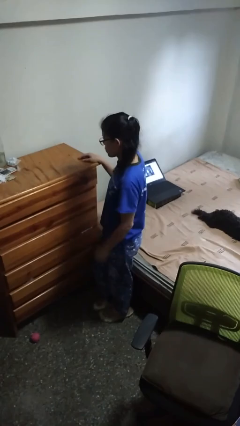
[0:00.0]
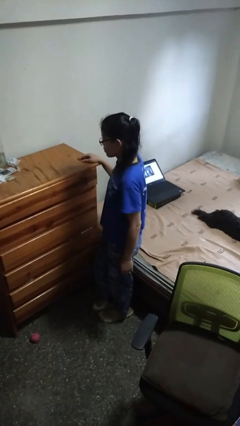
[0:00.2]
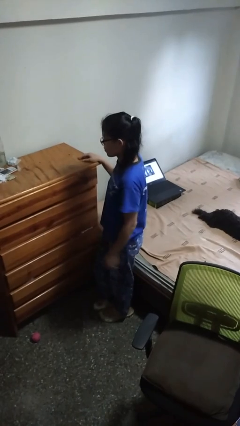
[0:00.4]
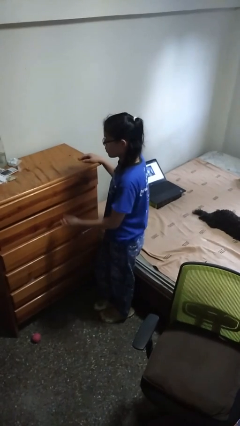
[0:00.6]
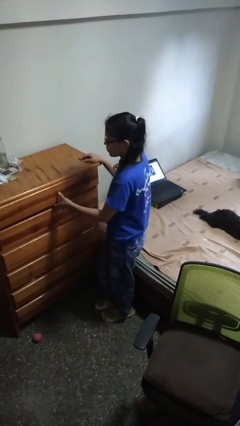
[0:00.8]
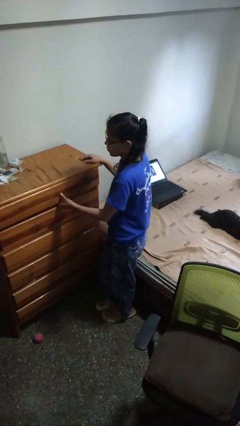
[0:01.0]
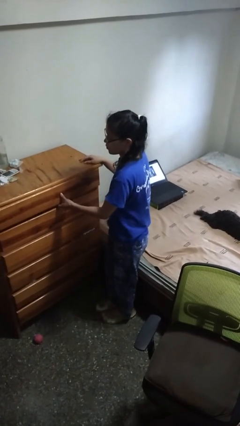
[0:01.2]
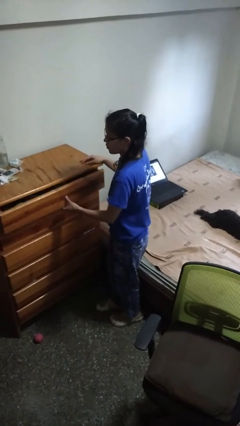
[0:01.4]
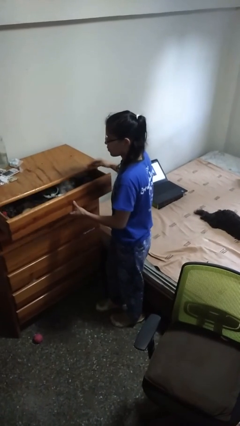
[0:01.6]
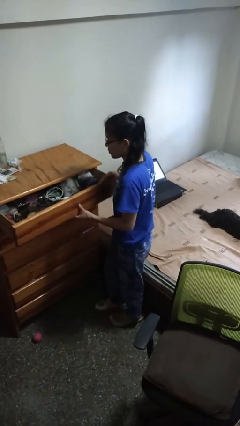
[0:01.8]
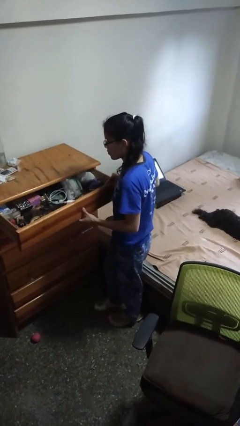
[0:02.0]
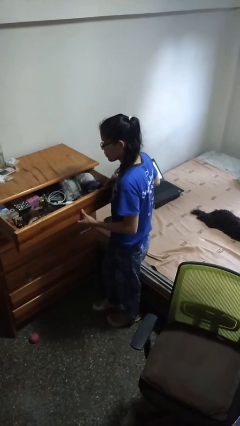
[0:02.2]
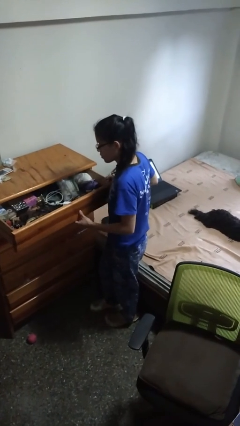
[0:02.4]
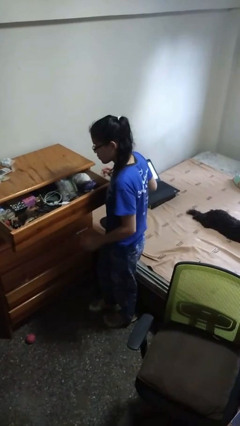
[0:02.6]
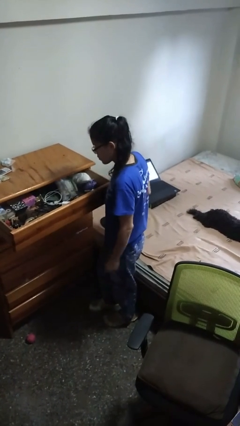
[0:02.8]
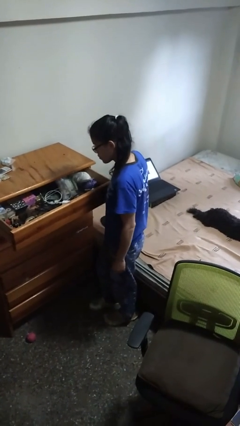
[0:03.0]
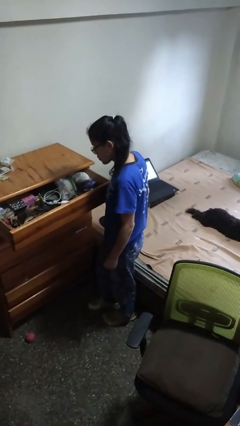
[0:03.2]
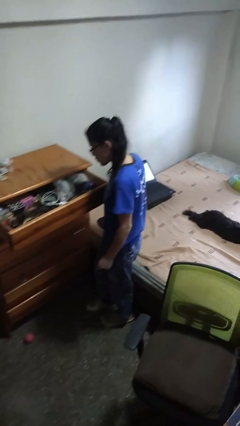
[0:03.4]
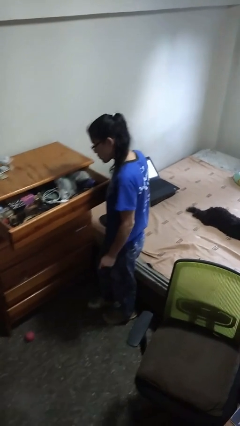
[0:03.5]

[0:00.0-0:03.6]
person opens dresser drawer

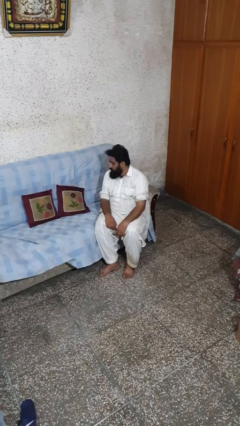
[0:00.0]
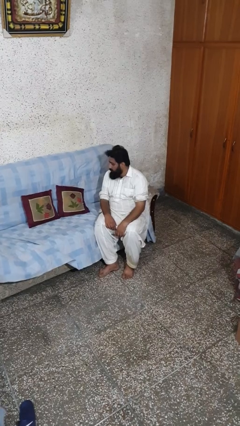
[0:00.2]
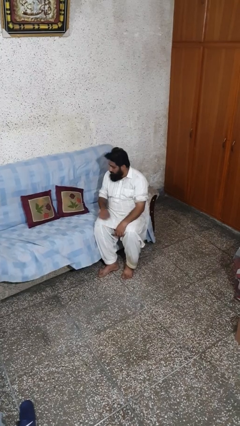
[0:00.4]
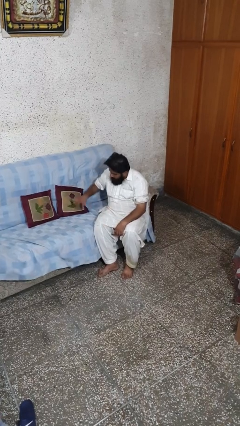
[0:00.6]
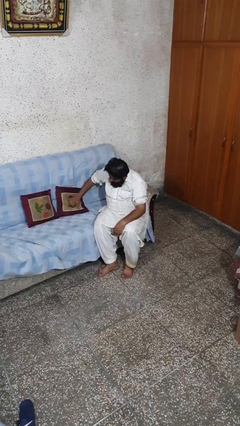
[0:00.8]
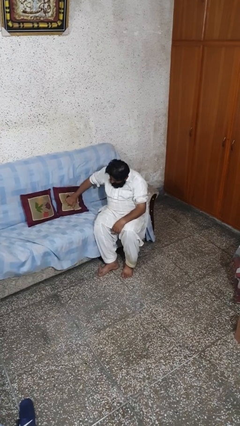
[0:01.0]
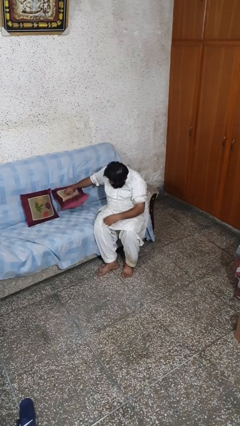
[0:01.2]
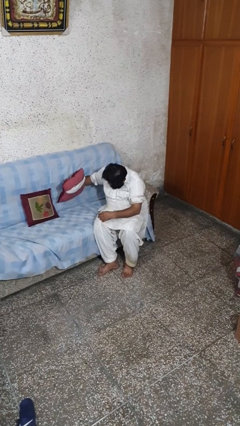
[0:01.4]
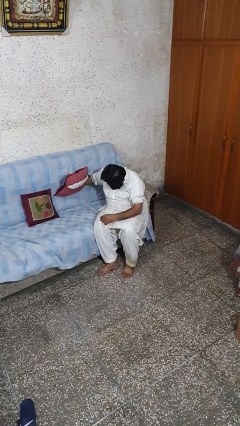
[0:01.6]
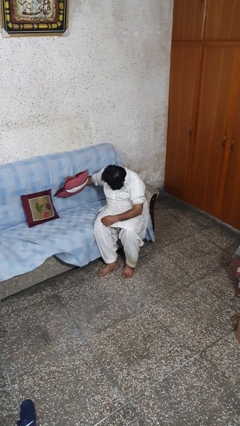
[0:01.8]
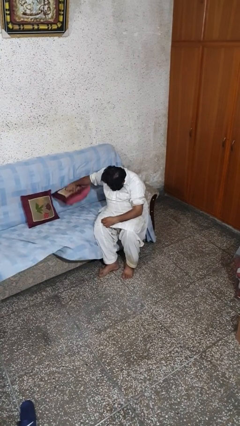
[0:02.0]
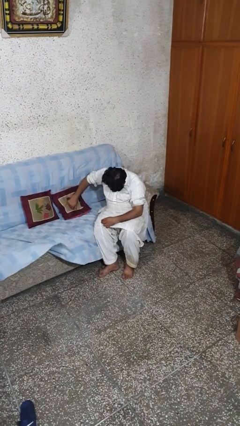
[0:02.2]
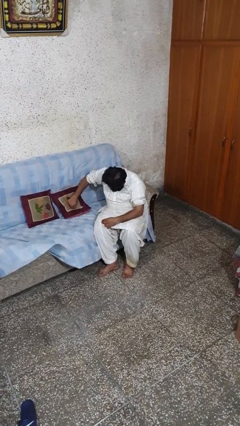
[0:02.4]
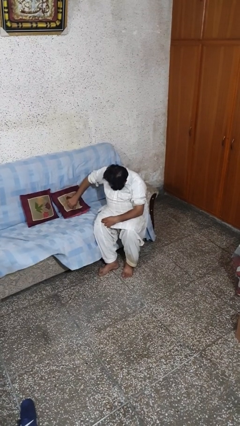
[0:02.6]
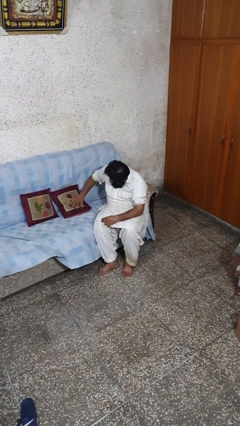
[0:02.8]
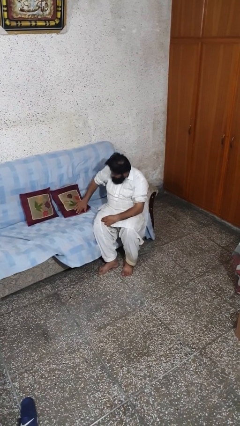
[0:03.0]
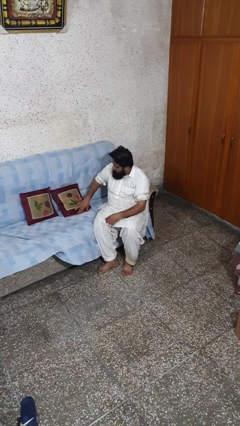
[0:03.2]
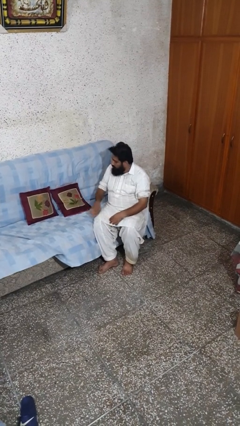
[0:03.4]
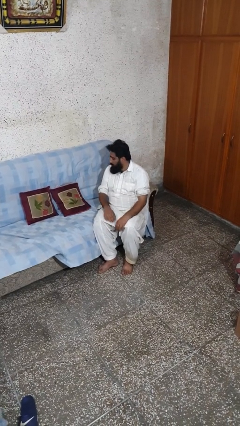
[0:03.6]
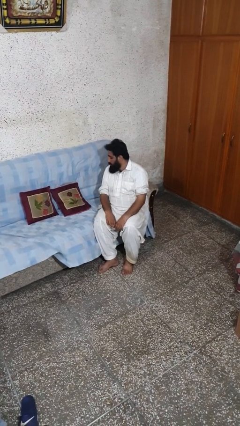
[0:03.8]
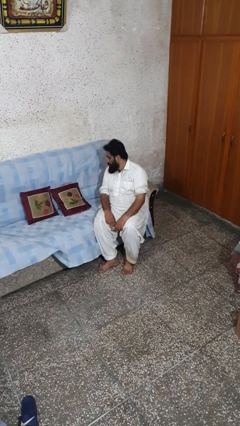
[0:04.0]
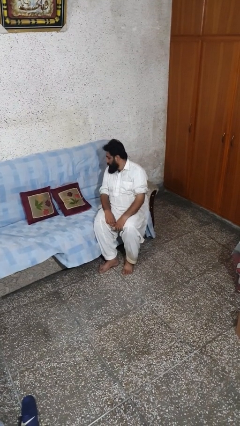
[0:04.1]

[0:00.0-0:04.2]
person searches in couch

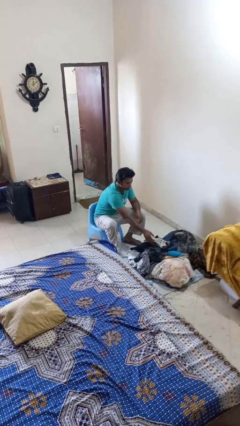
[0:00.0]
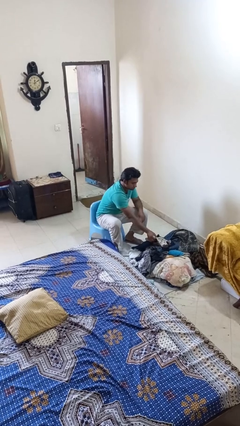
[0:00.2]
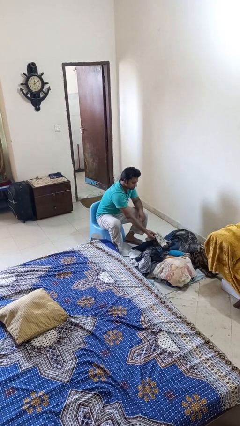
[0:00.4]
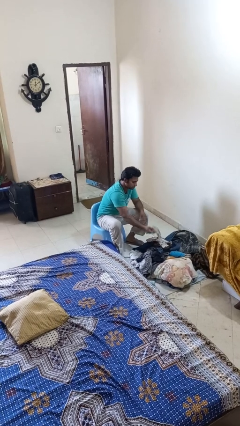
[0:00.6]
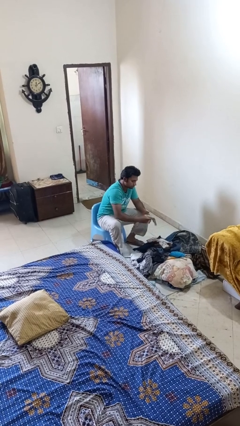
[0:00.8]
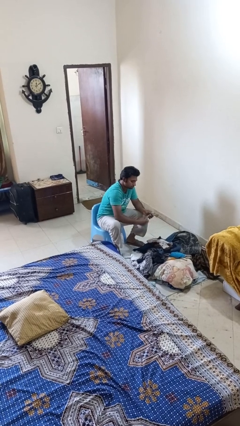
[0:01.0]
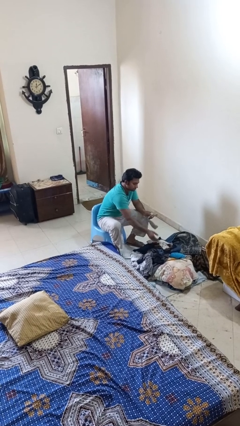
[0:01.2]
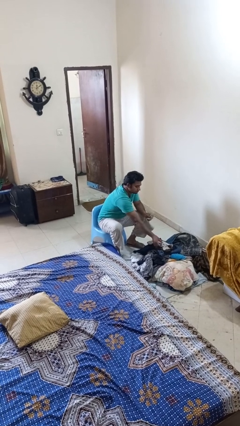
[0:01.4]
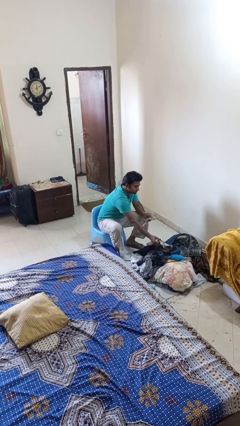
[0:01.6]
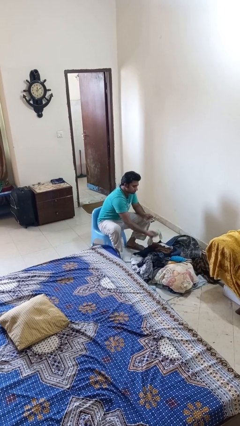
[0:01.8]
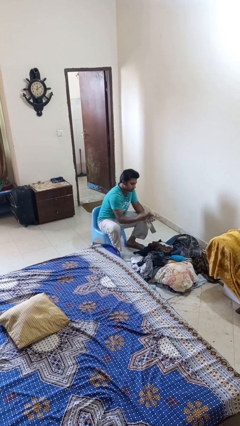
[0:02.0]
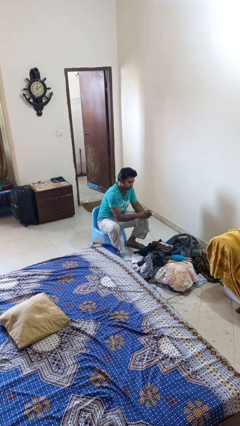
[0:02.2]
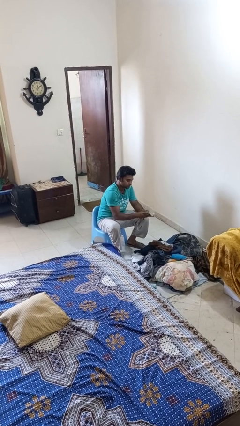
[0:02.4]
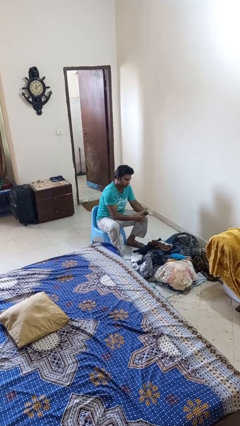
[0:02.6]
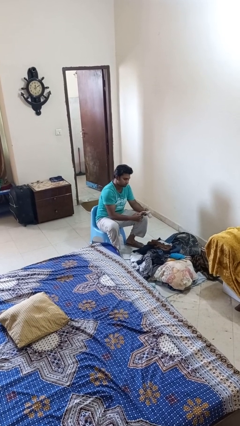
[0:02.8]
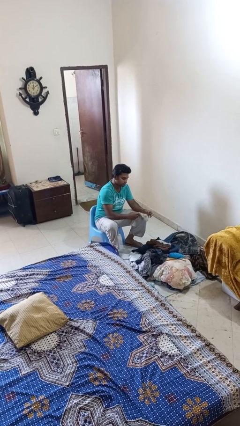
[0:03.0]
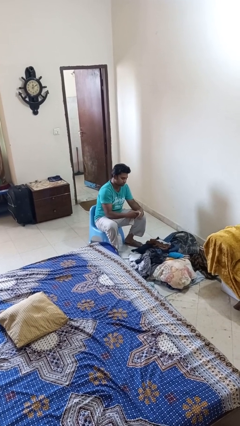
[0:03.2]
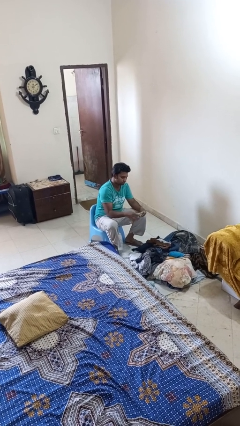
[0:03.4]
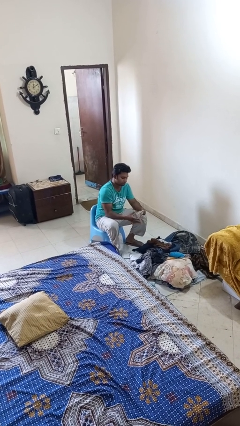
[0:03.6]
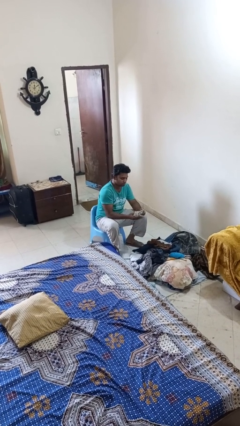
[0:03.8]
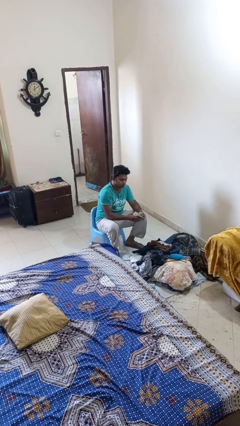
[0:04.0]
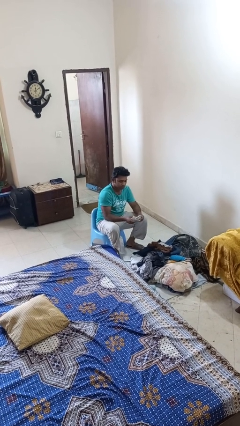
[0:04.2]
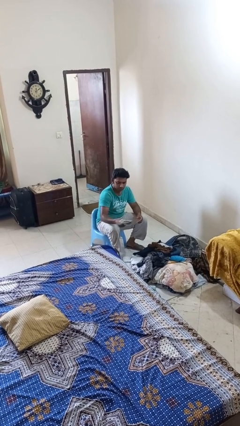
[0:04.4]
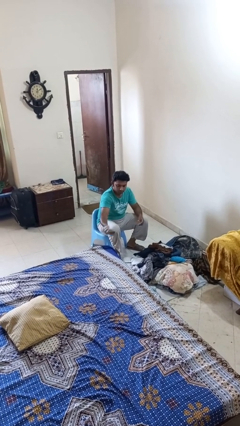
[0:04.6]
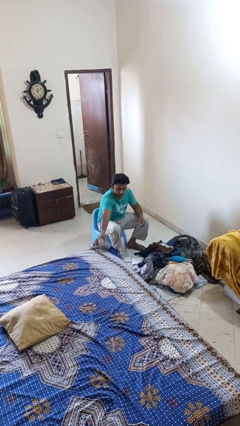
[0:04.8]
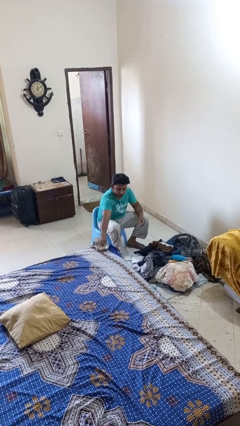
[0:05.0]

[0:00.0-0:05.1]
person folds socks

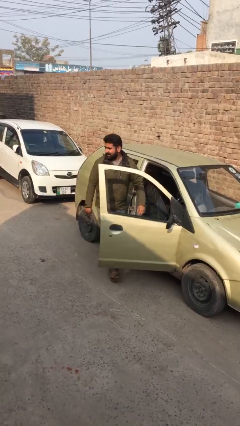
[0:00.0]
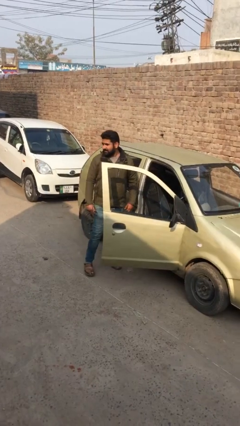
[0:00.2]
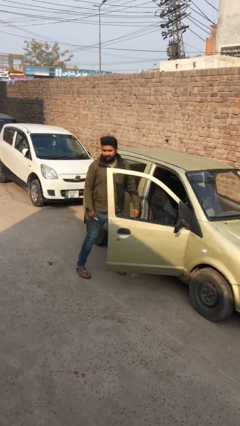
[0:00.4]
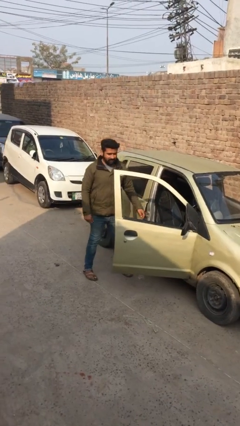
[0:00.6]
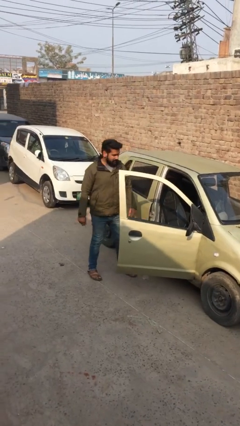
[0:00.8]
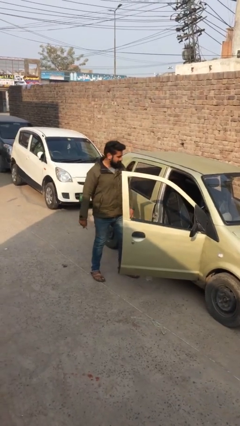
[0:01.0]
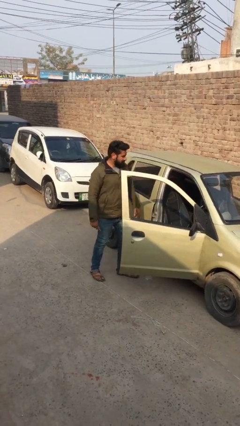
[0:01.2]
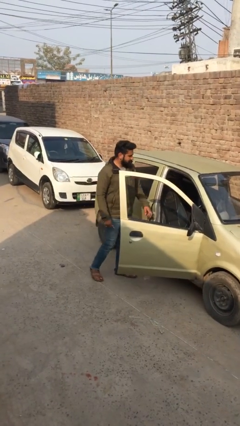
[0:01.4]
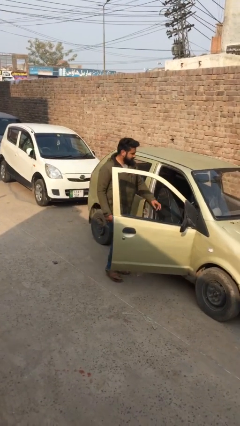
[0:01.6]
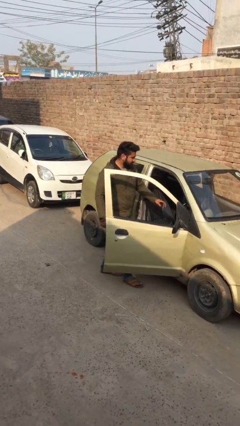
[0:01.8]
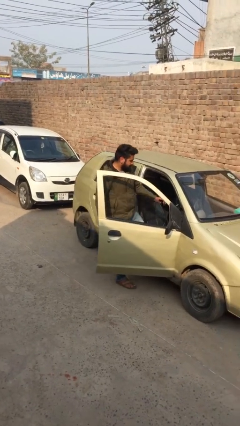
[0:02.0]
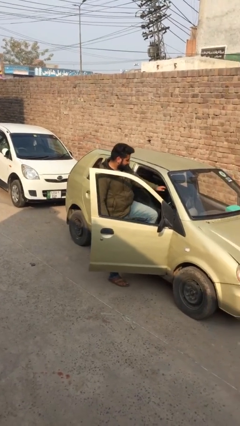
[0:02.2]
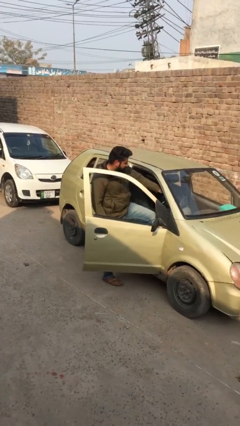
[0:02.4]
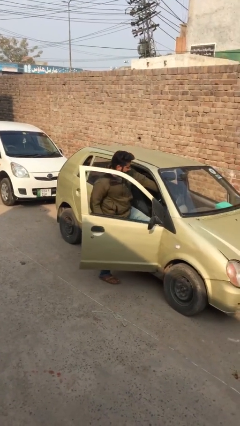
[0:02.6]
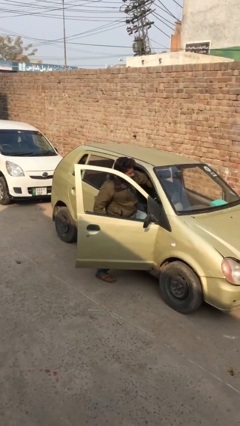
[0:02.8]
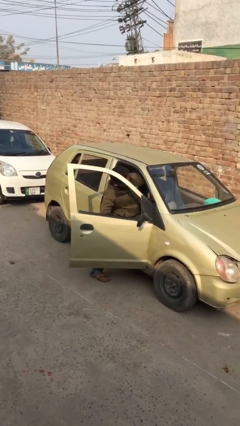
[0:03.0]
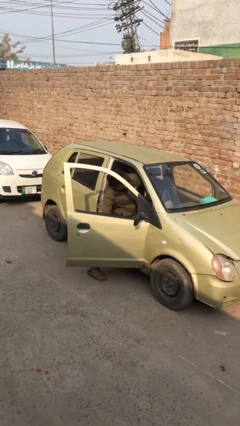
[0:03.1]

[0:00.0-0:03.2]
person enters car

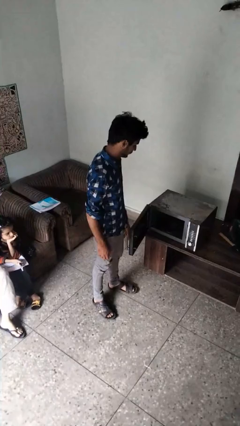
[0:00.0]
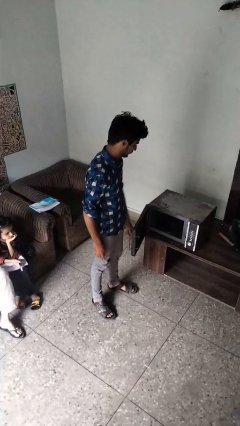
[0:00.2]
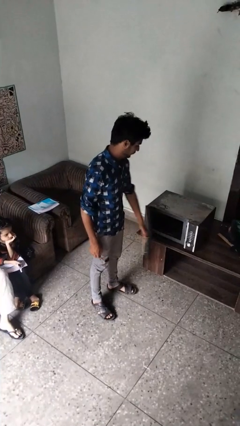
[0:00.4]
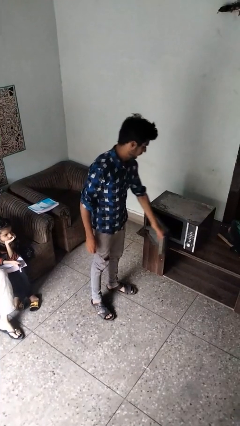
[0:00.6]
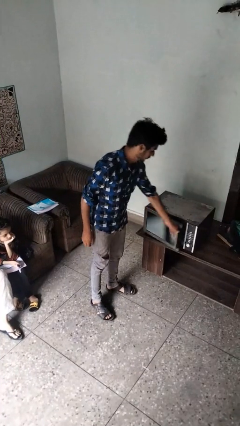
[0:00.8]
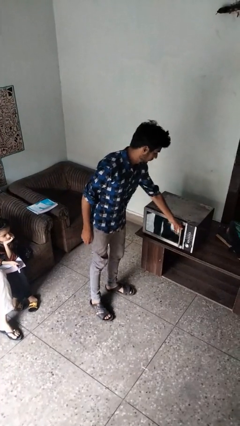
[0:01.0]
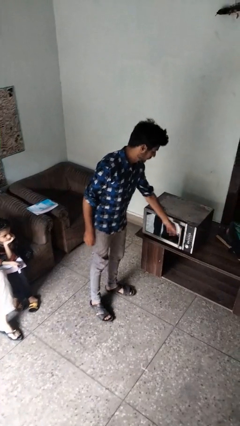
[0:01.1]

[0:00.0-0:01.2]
person closes microwave
